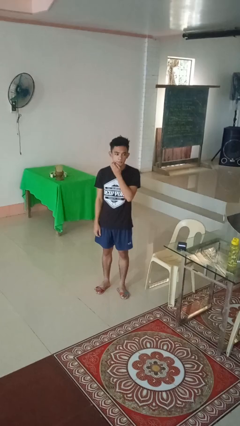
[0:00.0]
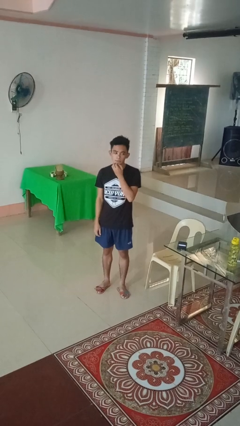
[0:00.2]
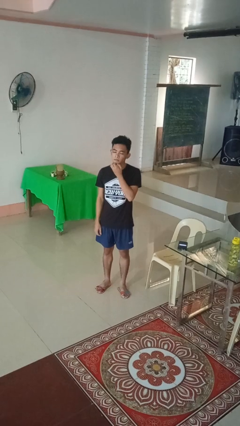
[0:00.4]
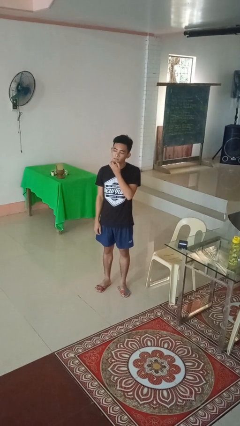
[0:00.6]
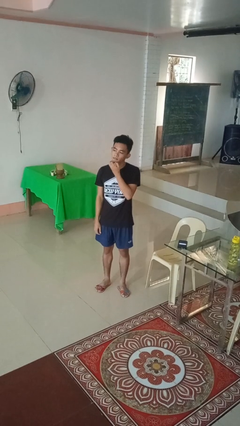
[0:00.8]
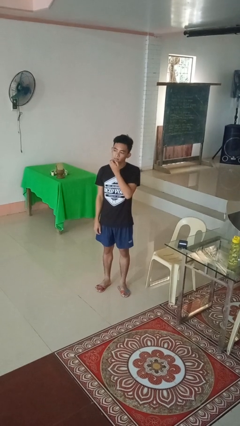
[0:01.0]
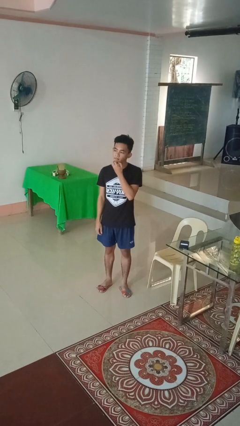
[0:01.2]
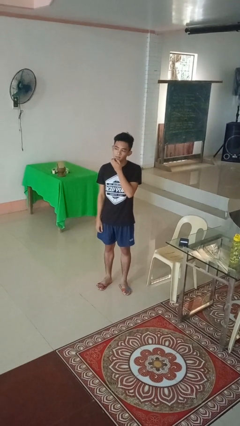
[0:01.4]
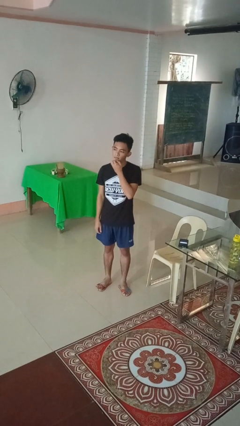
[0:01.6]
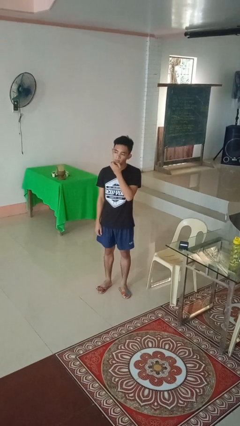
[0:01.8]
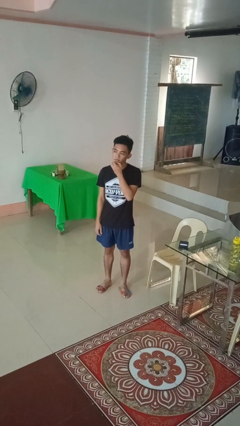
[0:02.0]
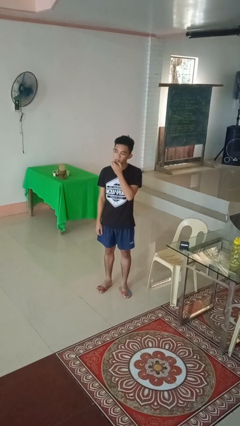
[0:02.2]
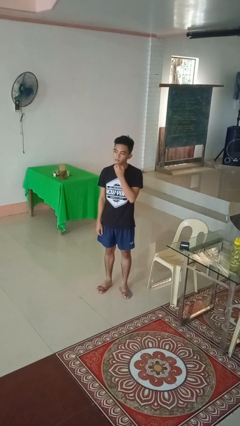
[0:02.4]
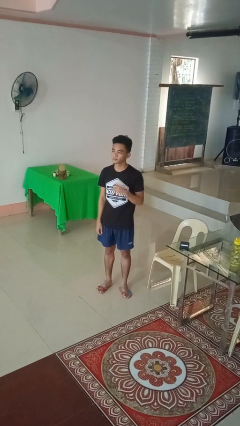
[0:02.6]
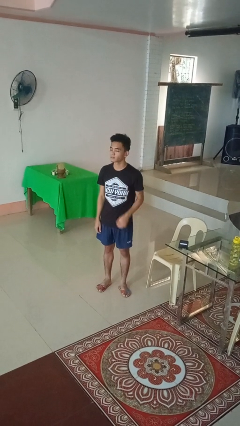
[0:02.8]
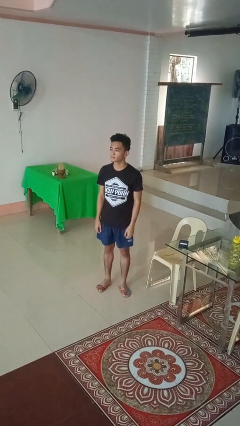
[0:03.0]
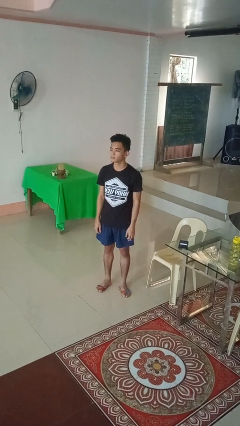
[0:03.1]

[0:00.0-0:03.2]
person scratches face

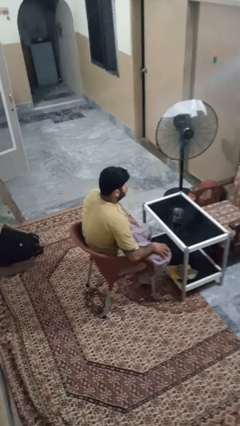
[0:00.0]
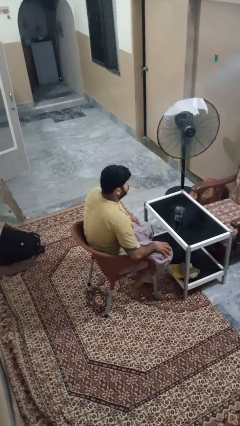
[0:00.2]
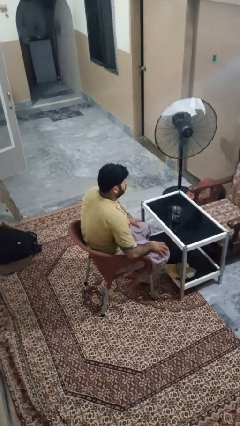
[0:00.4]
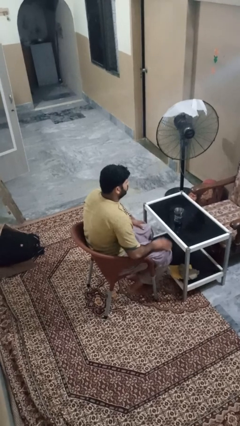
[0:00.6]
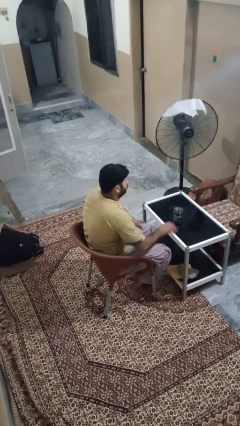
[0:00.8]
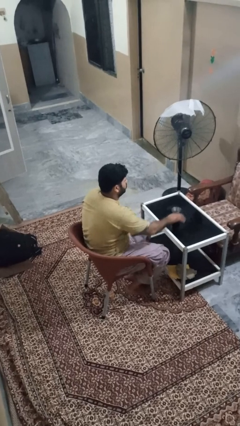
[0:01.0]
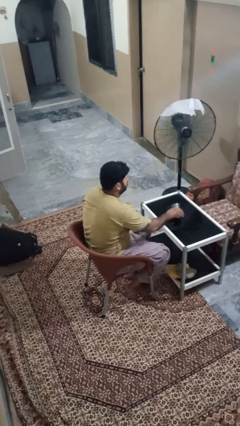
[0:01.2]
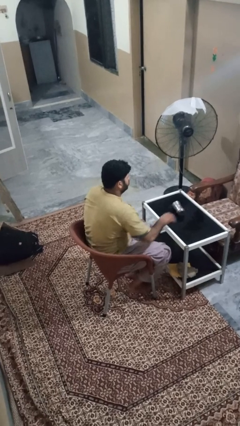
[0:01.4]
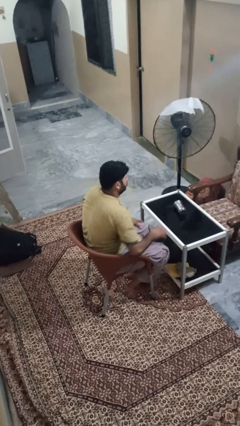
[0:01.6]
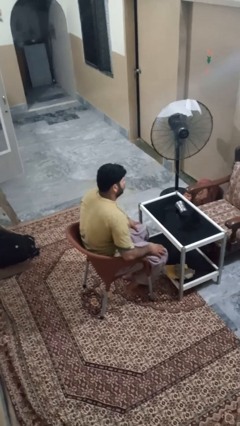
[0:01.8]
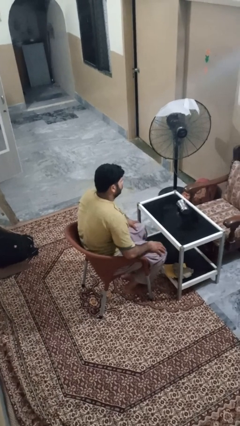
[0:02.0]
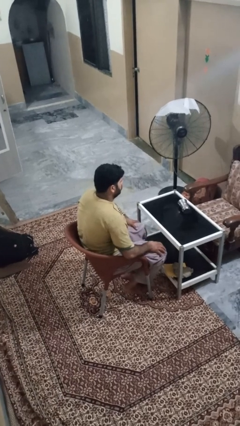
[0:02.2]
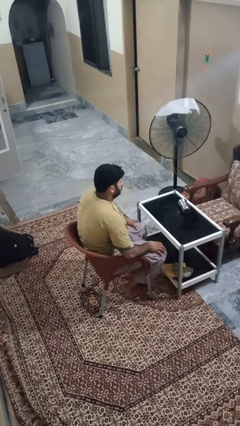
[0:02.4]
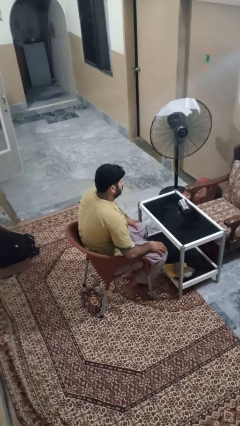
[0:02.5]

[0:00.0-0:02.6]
person knocks over glass

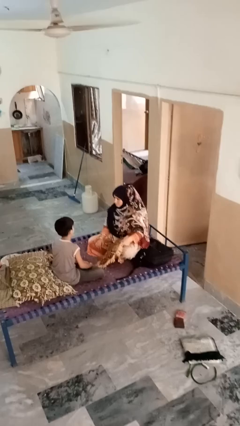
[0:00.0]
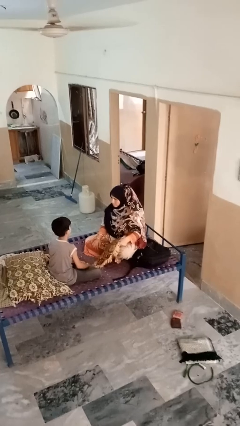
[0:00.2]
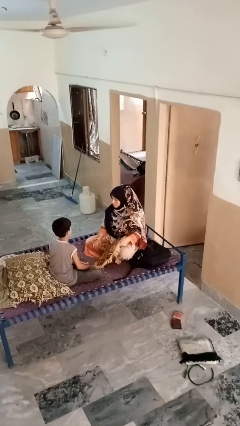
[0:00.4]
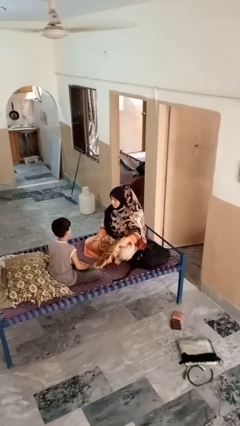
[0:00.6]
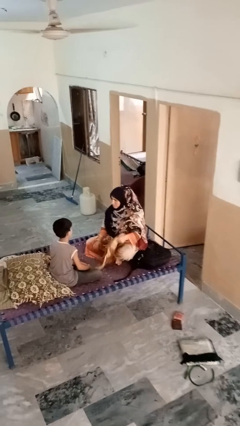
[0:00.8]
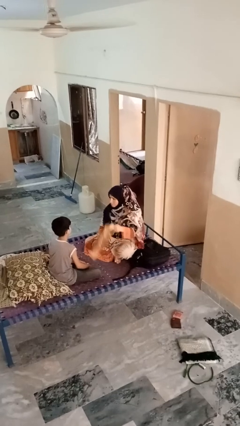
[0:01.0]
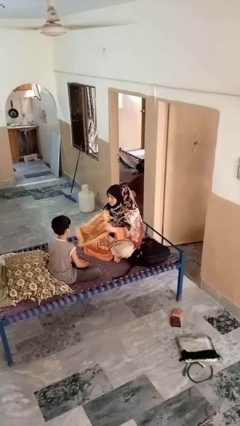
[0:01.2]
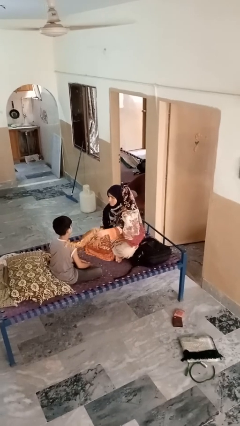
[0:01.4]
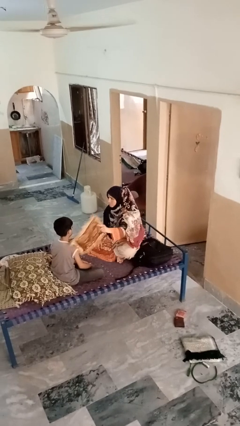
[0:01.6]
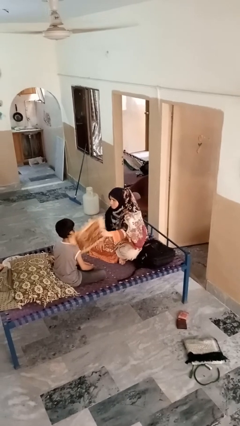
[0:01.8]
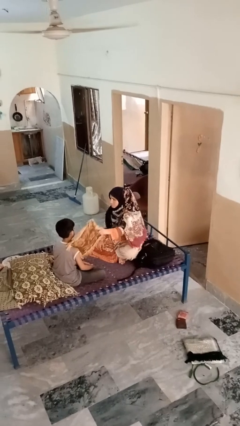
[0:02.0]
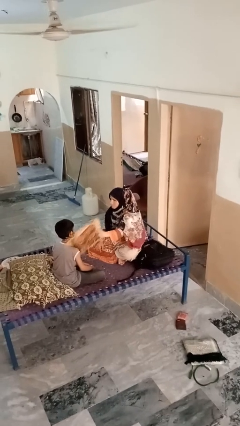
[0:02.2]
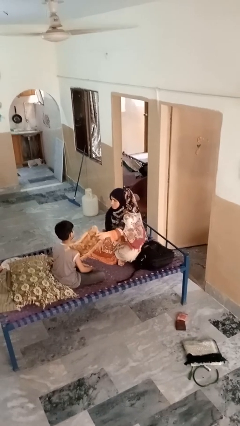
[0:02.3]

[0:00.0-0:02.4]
person hits person with pillow

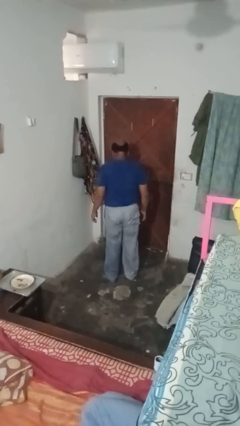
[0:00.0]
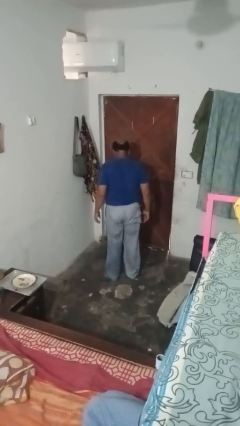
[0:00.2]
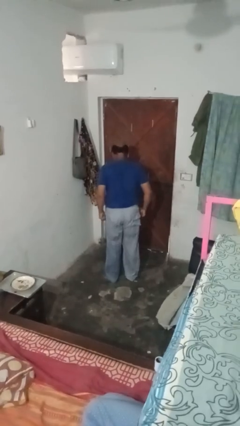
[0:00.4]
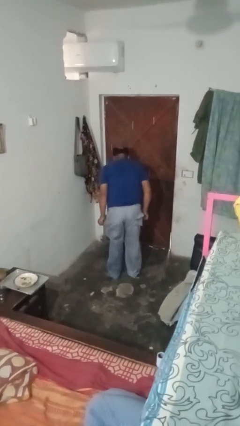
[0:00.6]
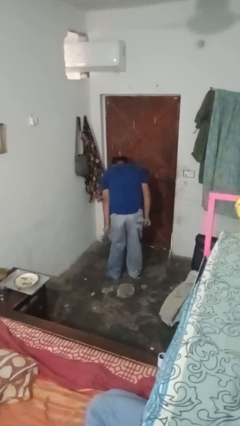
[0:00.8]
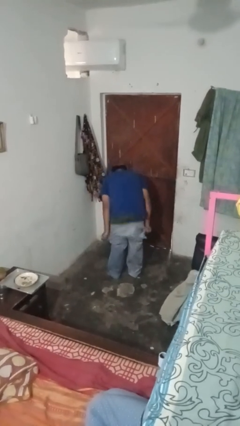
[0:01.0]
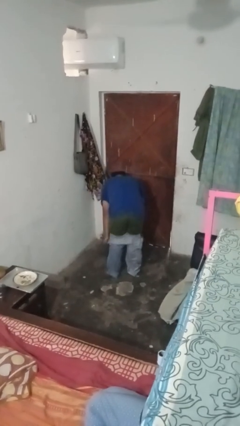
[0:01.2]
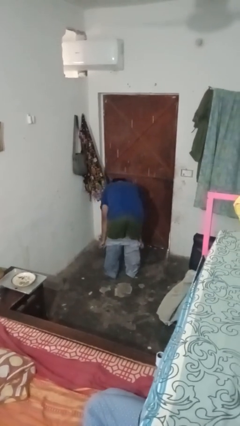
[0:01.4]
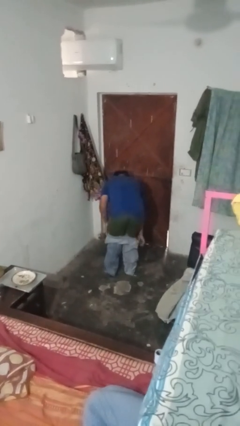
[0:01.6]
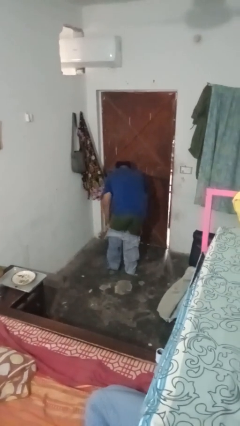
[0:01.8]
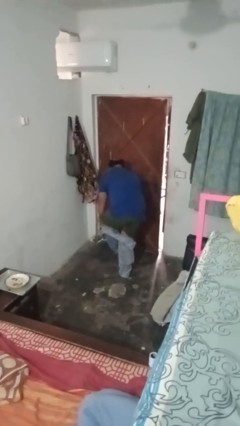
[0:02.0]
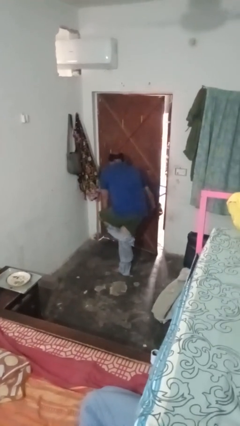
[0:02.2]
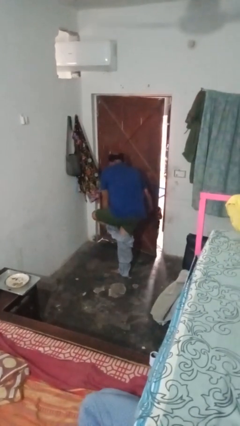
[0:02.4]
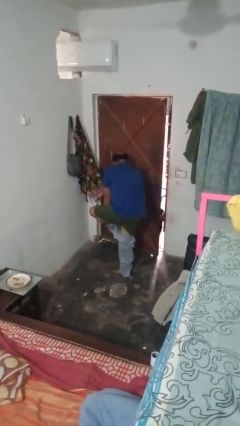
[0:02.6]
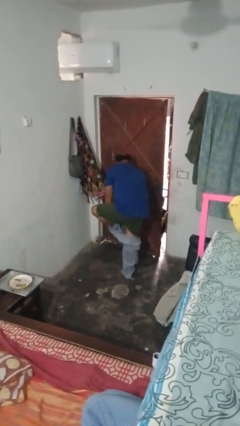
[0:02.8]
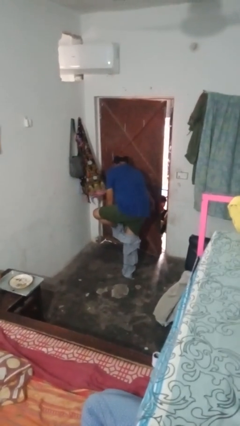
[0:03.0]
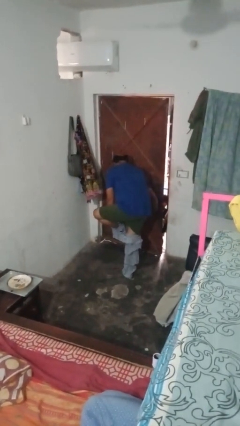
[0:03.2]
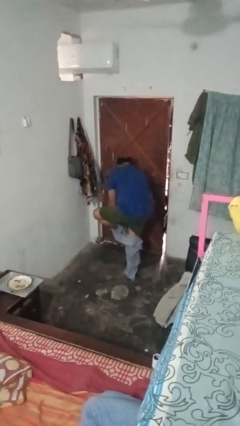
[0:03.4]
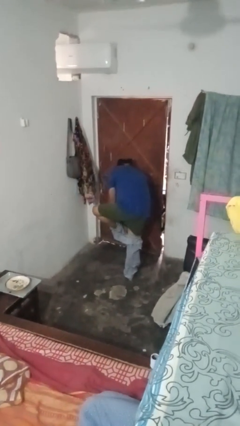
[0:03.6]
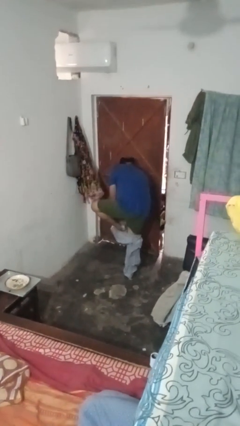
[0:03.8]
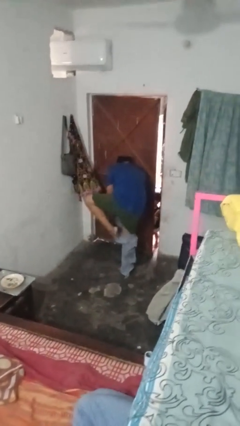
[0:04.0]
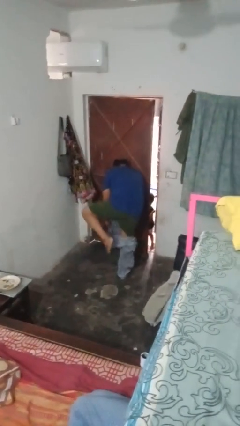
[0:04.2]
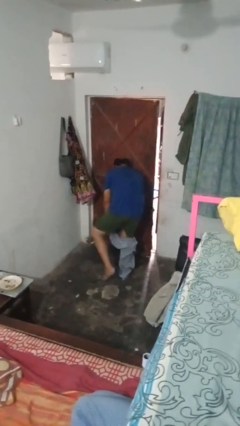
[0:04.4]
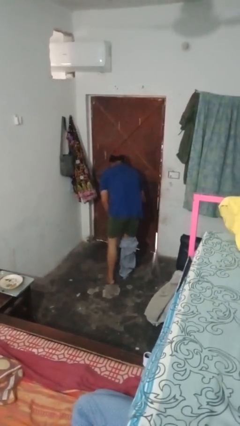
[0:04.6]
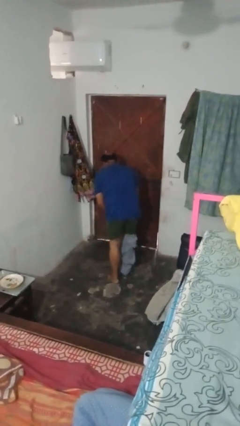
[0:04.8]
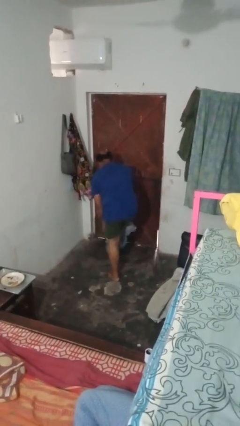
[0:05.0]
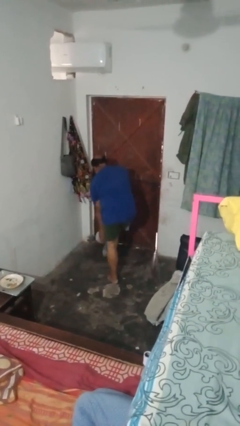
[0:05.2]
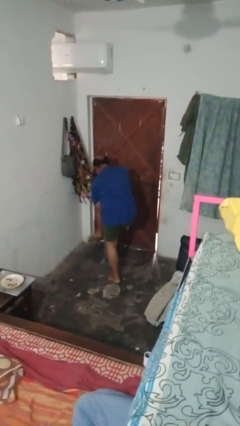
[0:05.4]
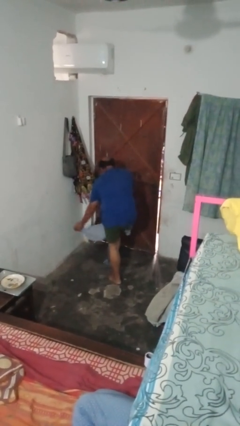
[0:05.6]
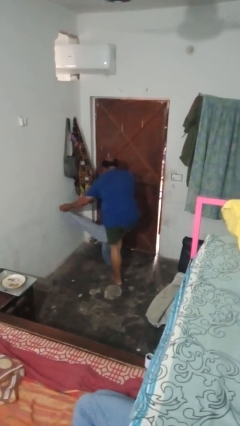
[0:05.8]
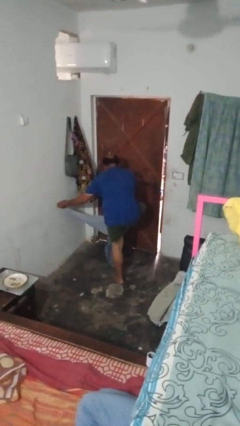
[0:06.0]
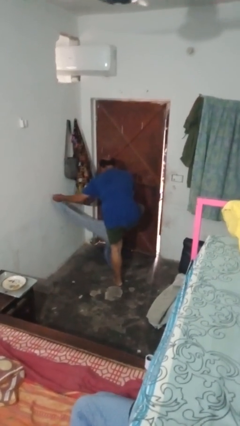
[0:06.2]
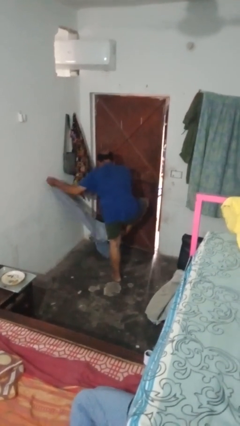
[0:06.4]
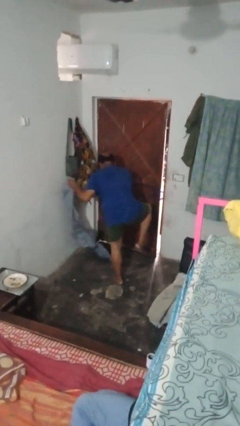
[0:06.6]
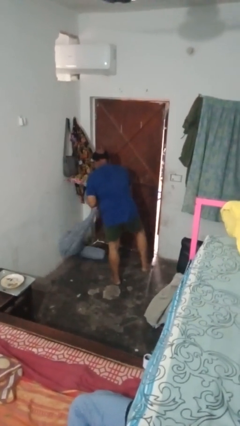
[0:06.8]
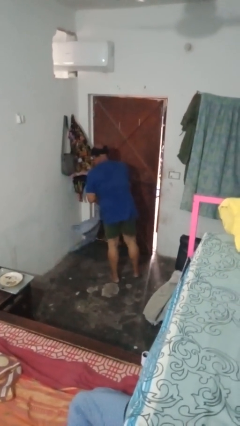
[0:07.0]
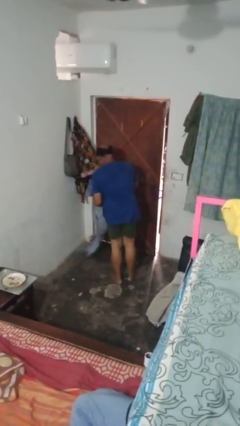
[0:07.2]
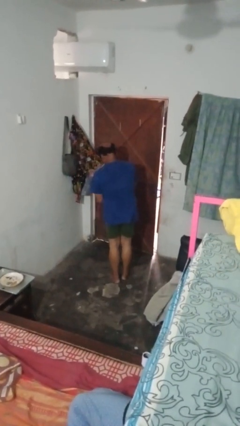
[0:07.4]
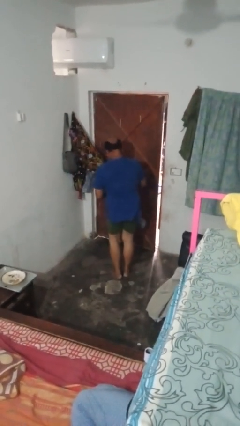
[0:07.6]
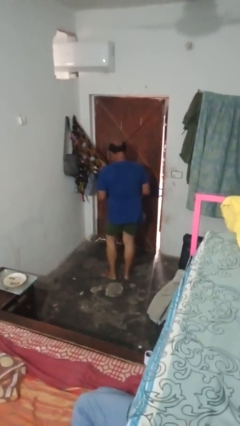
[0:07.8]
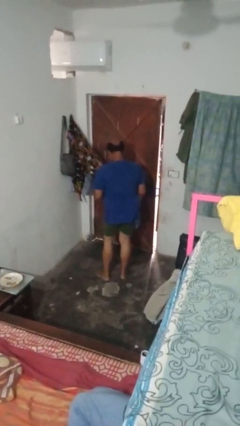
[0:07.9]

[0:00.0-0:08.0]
person takes off pants

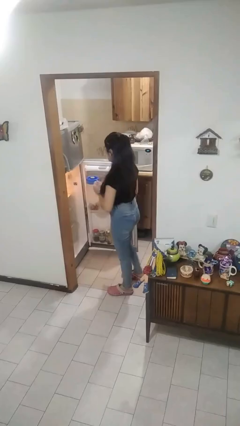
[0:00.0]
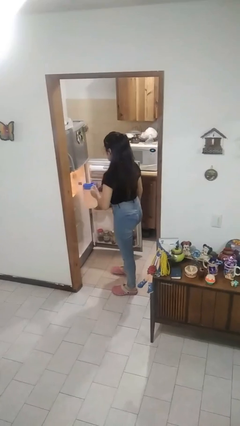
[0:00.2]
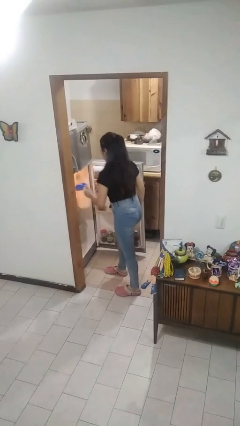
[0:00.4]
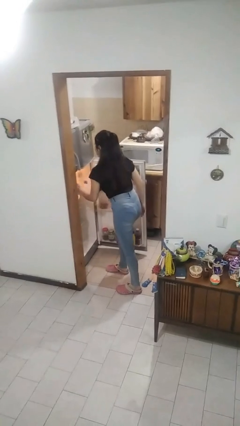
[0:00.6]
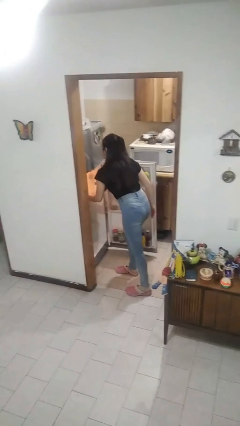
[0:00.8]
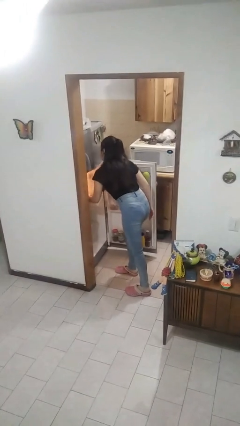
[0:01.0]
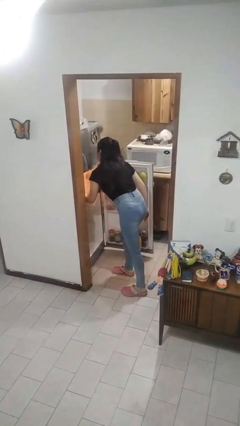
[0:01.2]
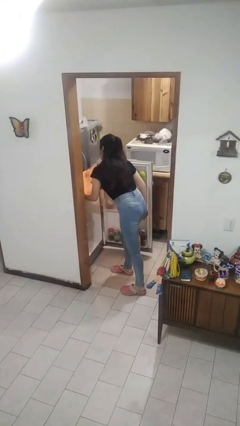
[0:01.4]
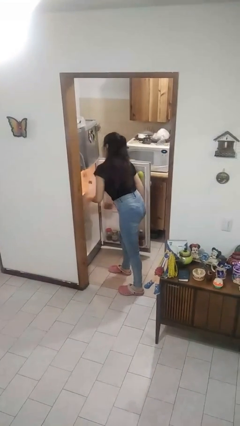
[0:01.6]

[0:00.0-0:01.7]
person puts object into refrigerator
